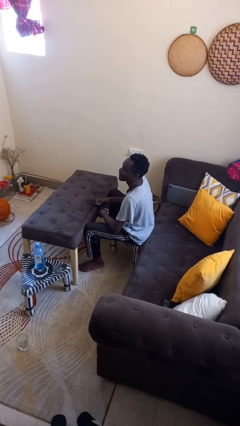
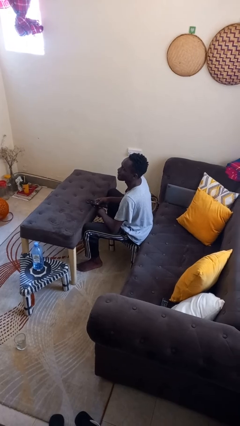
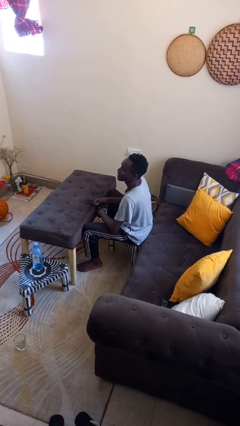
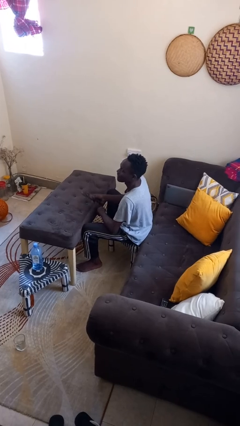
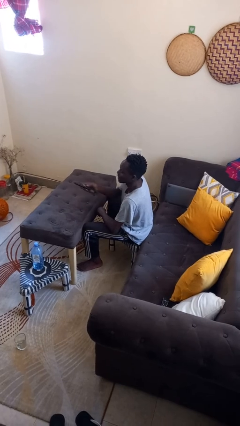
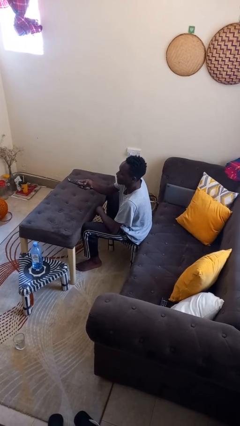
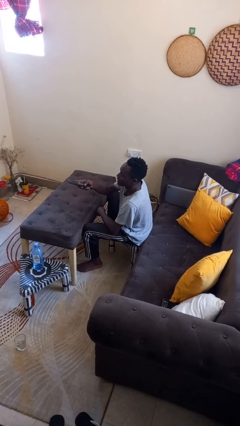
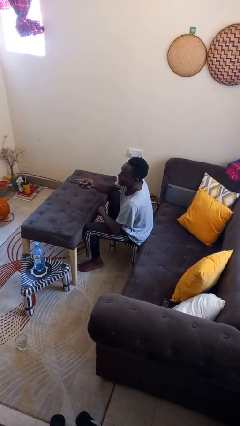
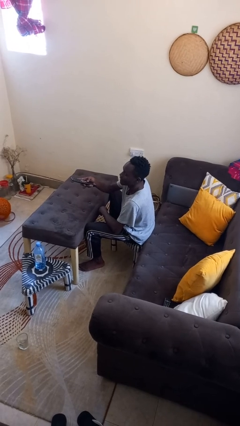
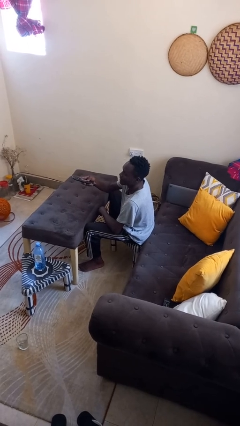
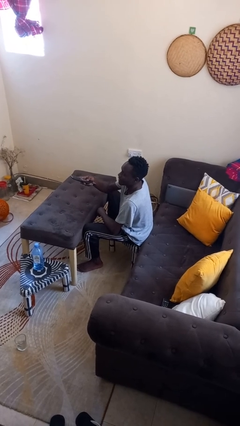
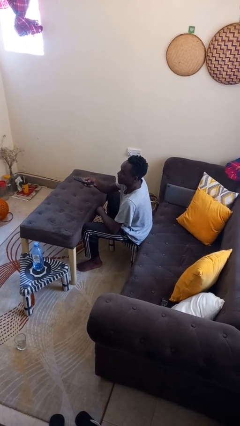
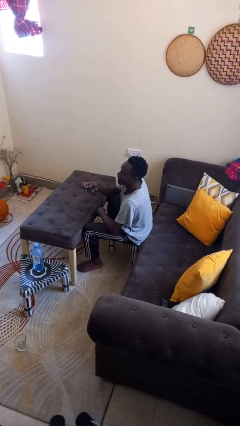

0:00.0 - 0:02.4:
person uses television remote

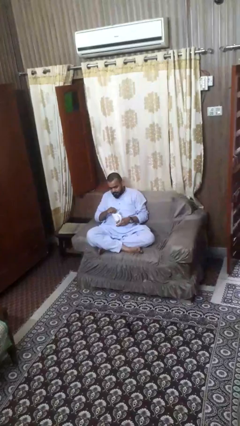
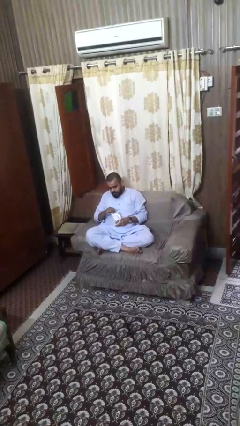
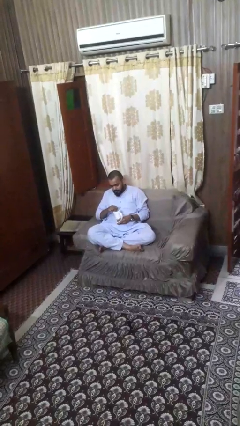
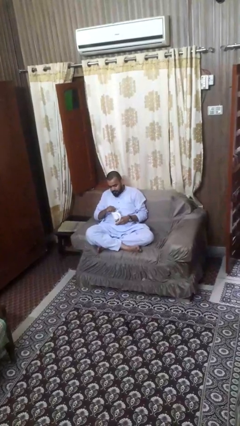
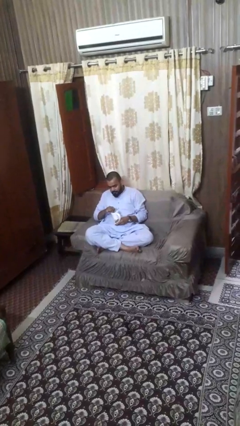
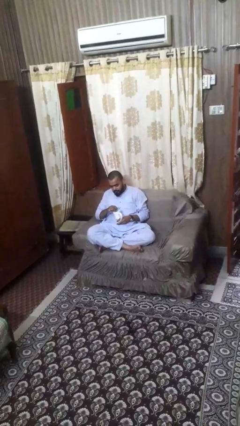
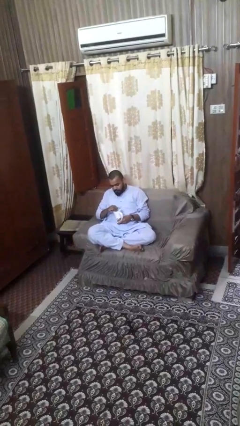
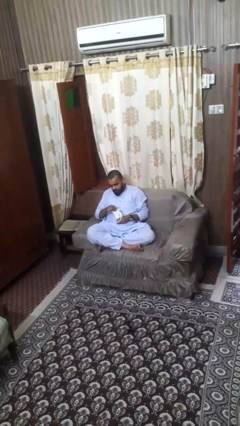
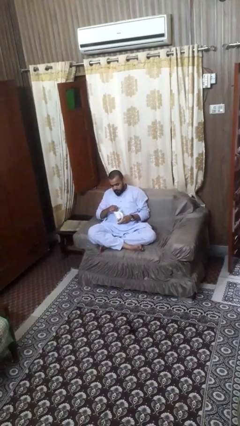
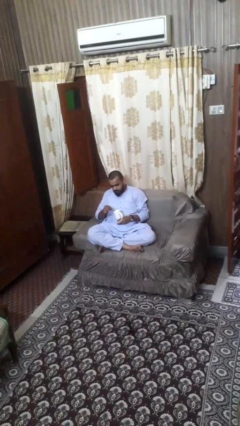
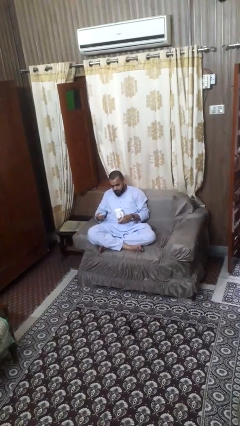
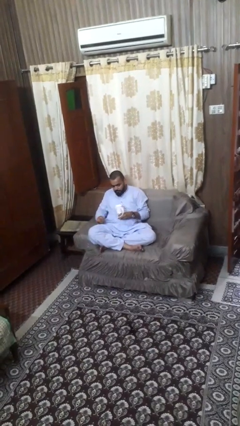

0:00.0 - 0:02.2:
person stirs mug

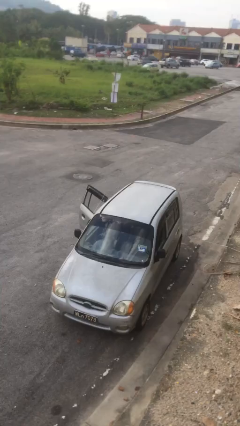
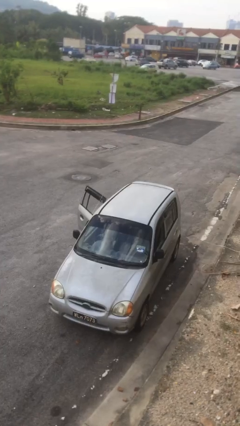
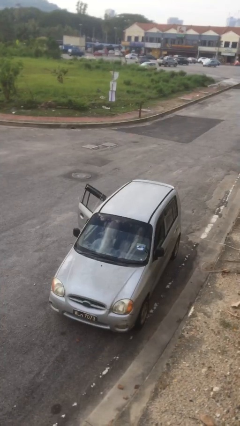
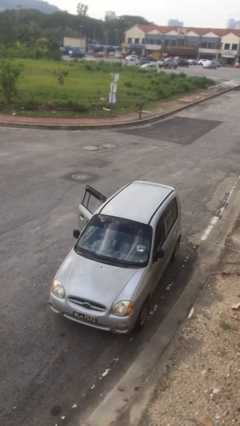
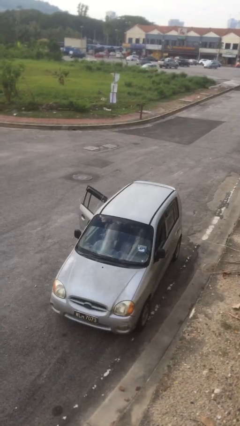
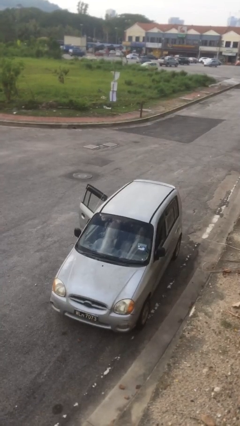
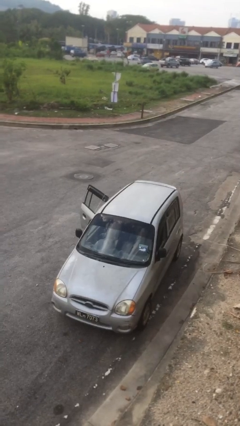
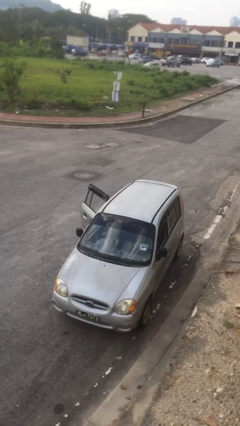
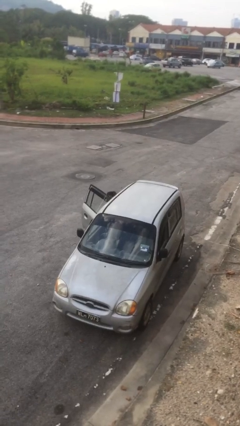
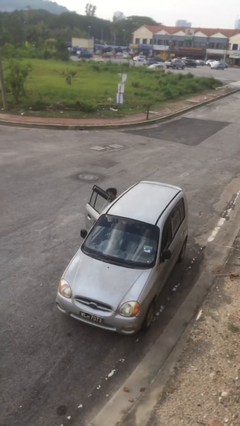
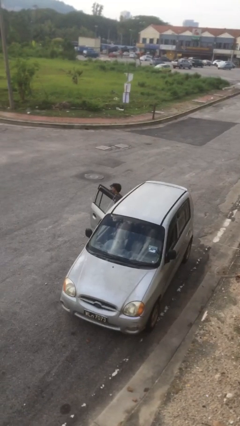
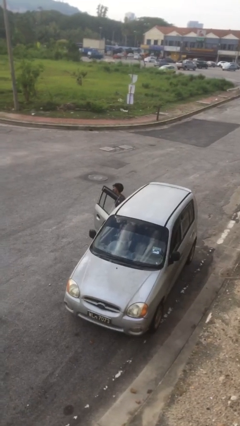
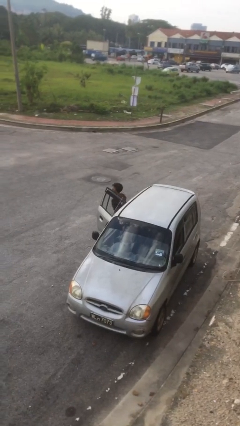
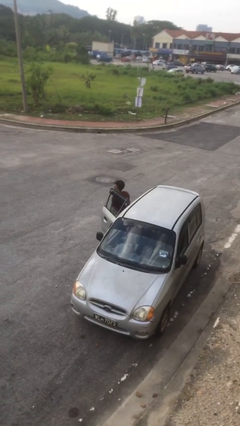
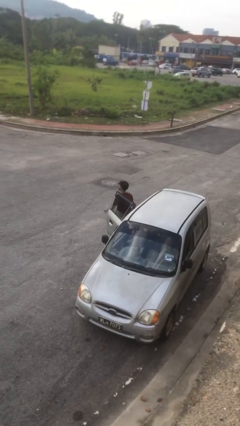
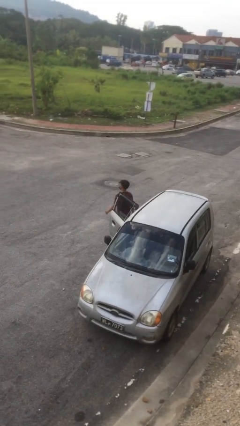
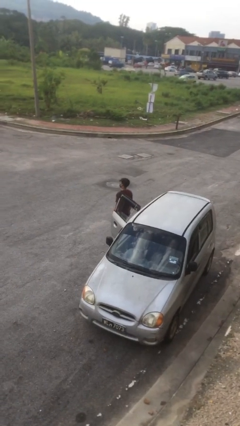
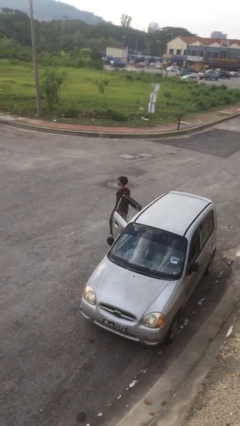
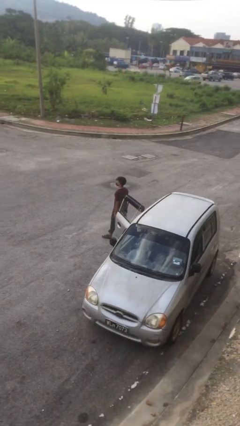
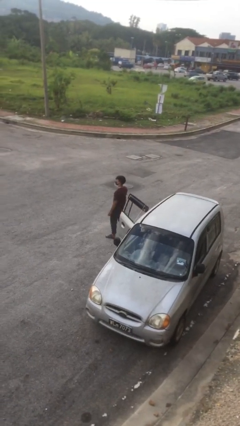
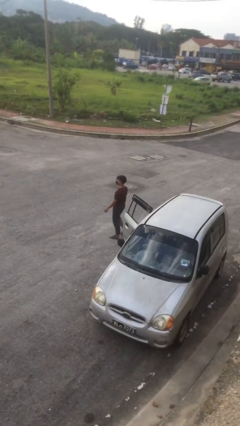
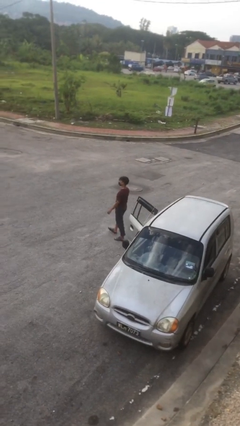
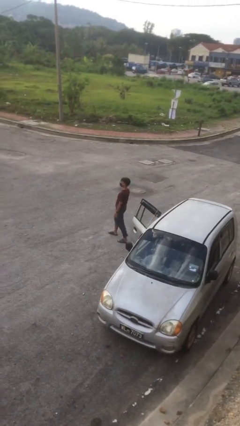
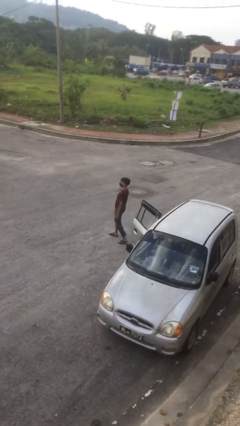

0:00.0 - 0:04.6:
person exits car

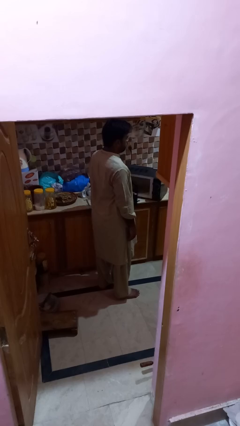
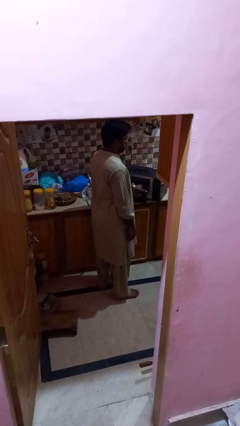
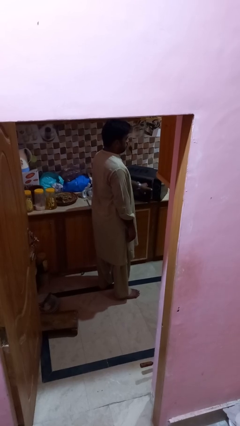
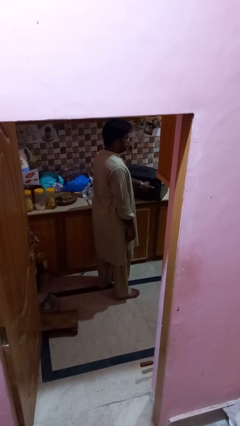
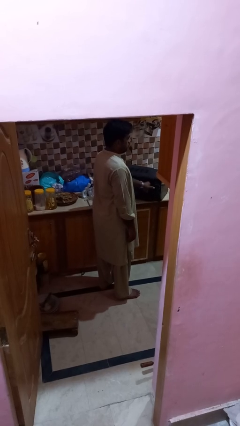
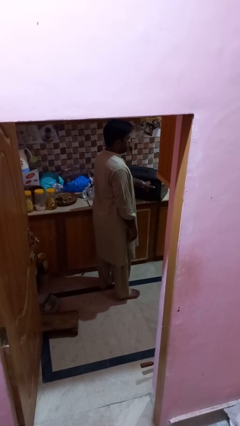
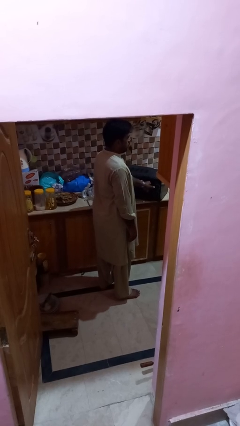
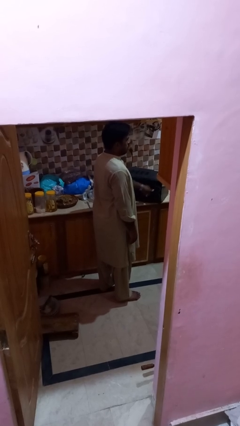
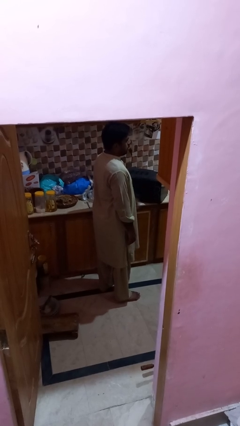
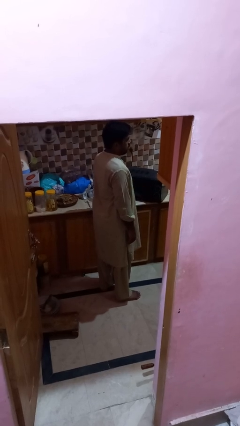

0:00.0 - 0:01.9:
person closes microwave

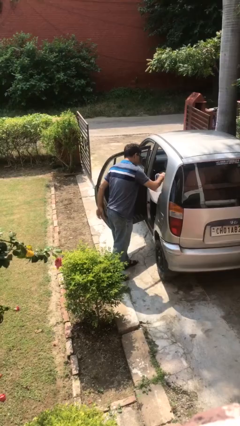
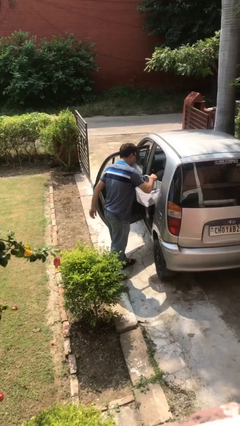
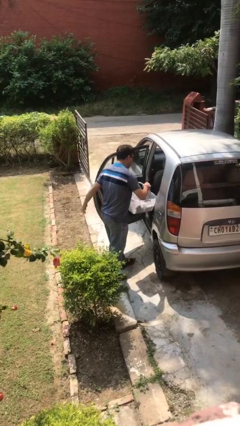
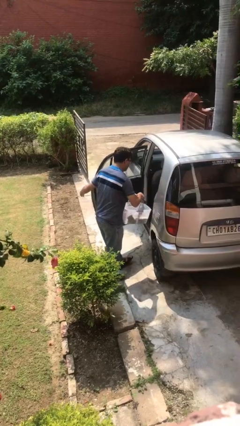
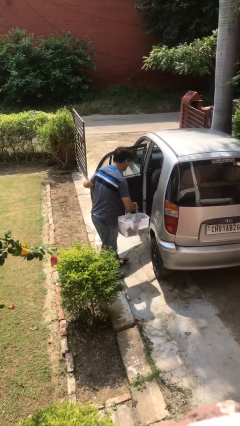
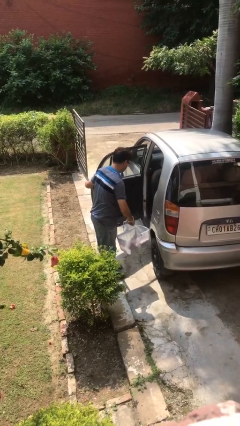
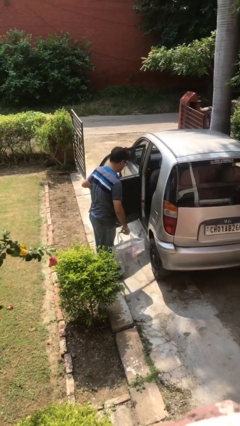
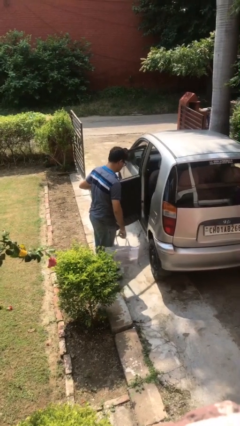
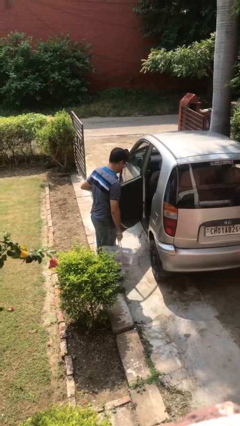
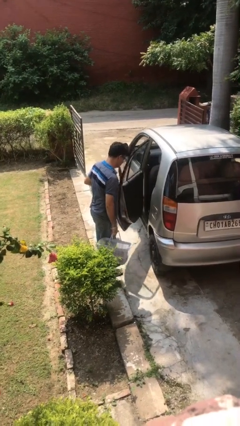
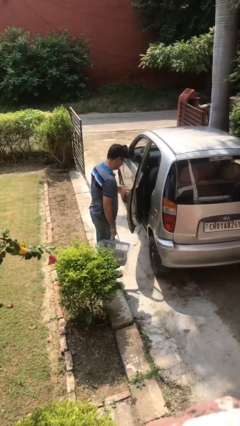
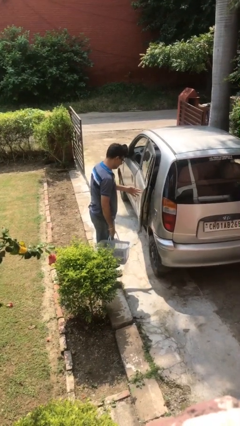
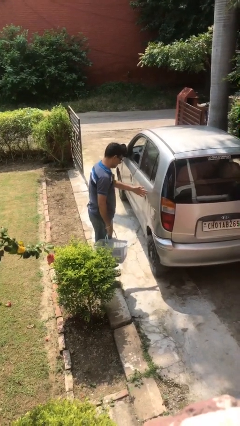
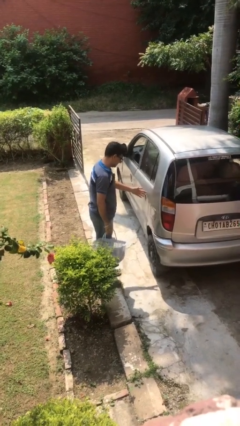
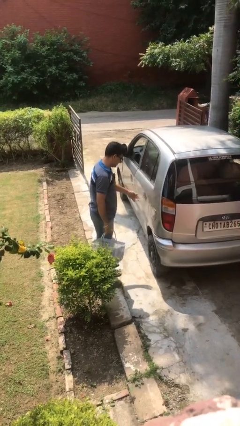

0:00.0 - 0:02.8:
person unloads car

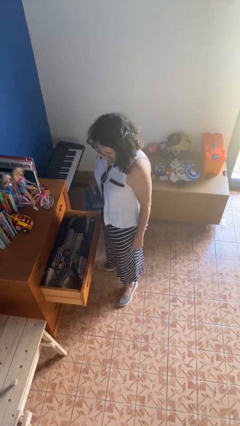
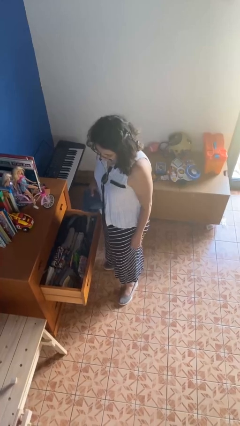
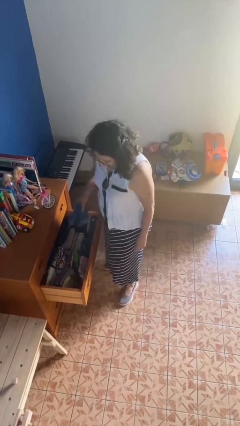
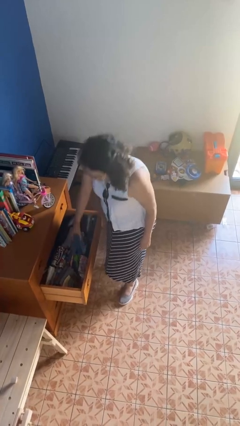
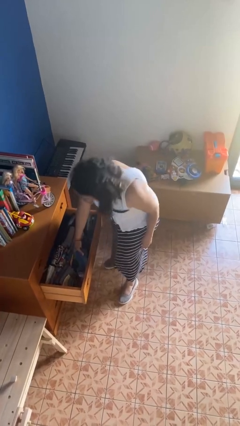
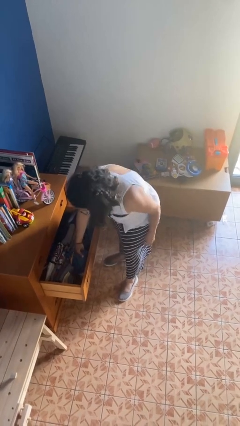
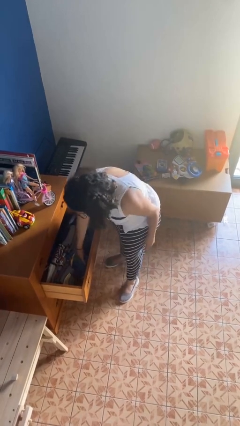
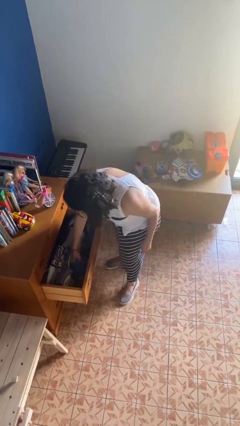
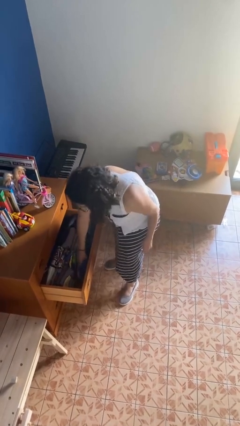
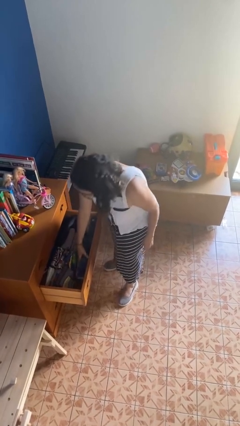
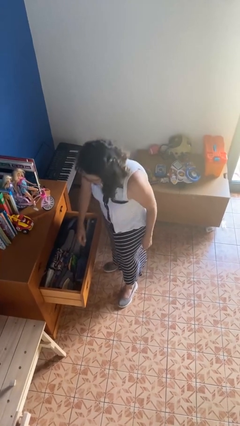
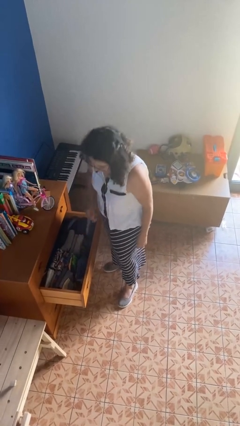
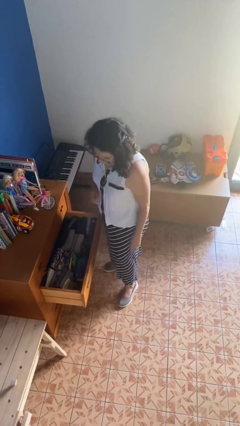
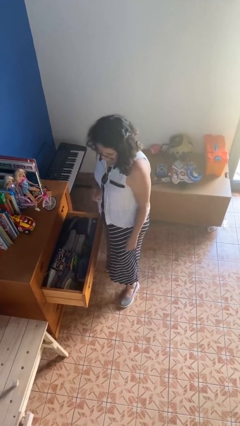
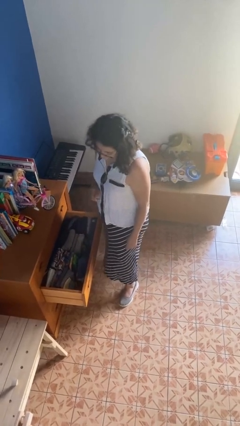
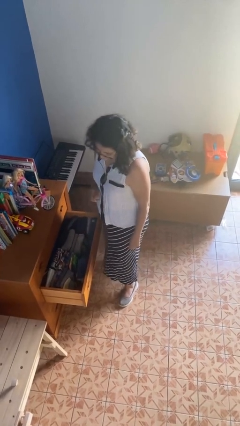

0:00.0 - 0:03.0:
person puts clothes into dresser

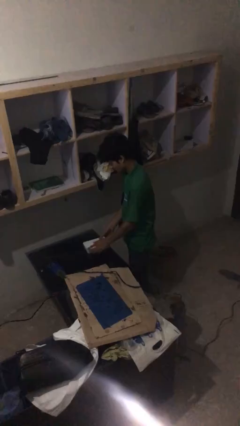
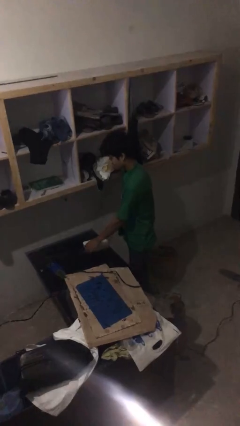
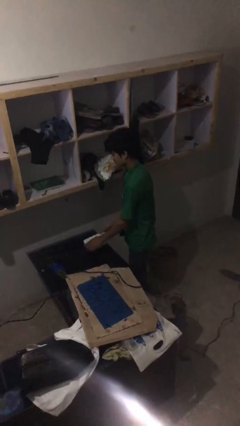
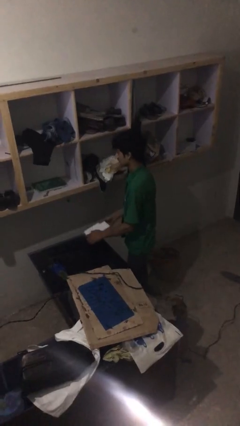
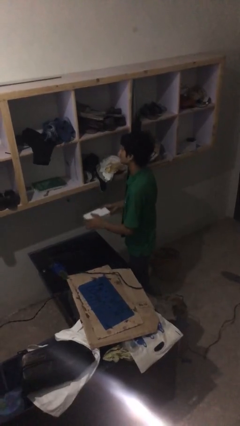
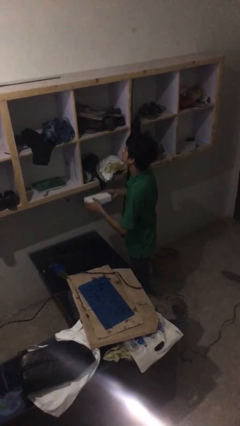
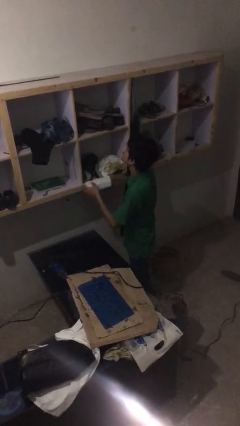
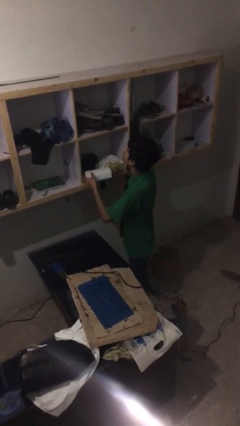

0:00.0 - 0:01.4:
person picks up object from table
